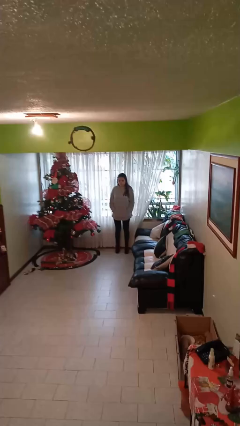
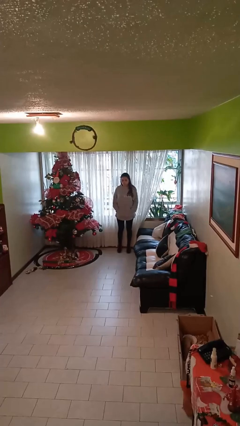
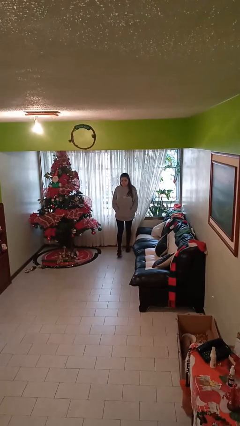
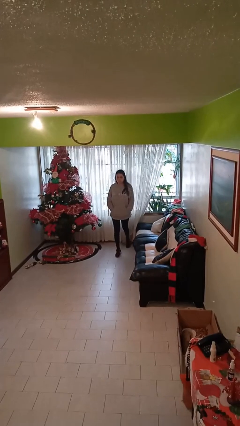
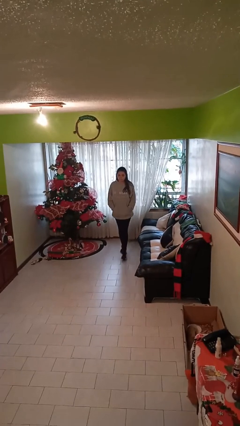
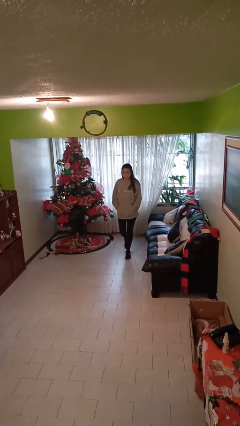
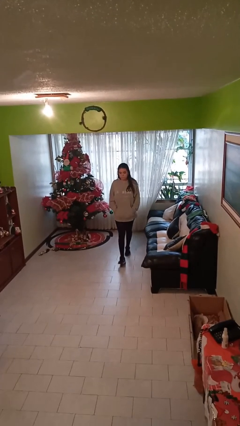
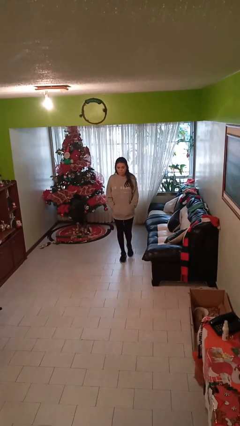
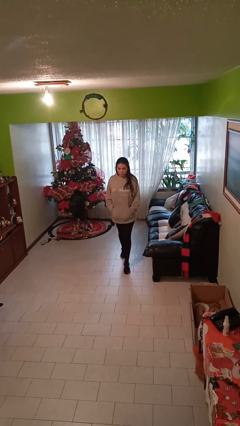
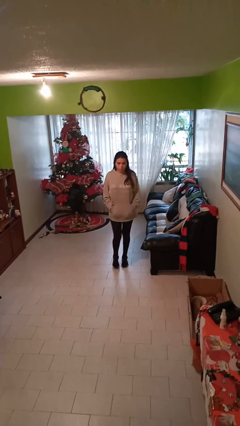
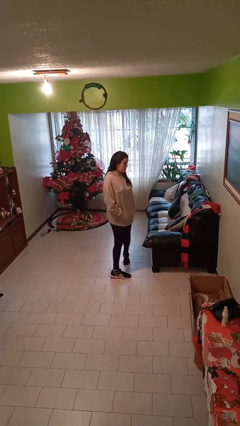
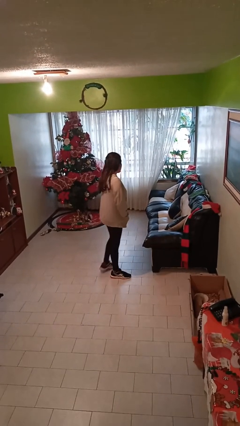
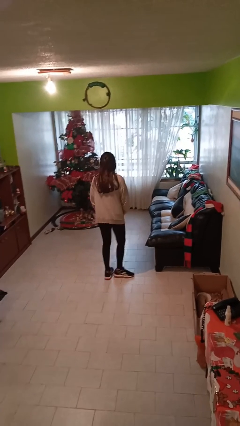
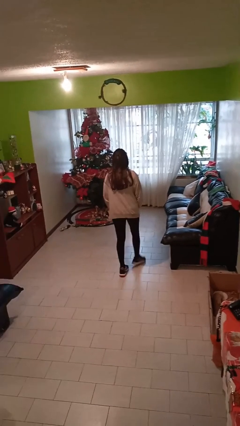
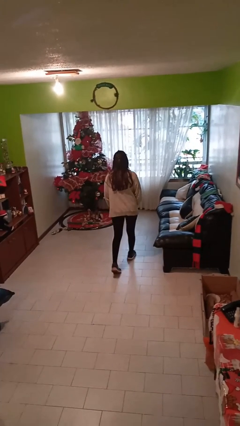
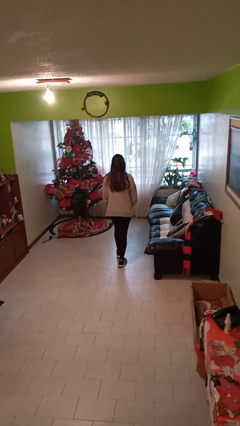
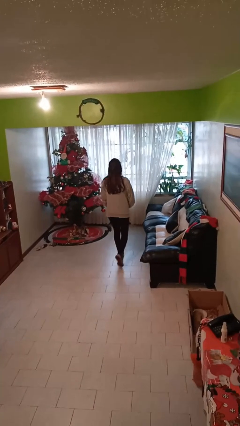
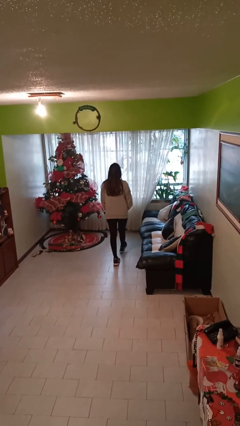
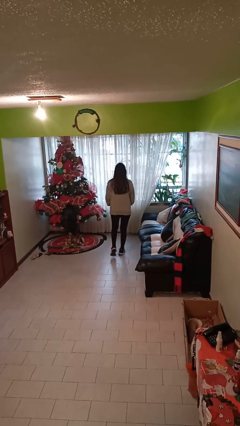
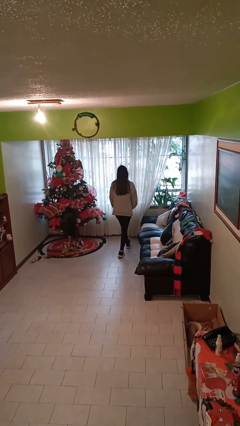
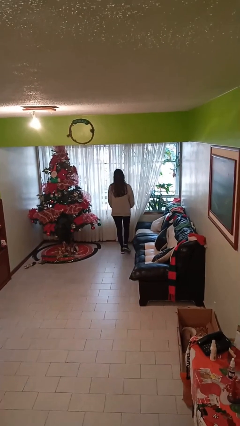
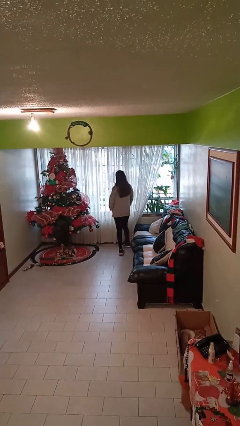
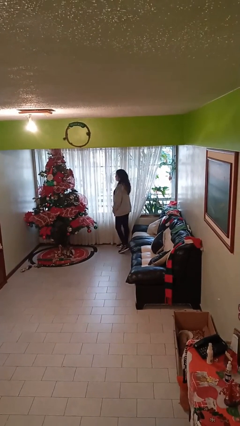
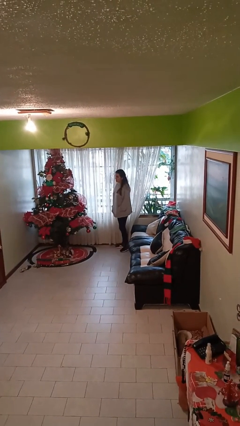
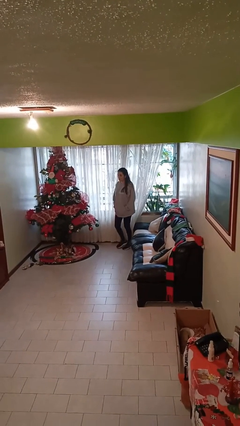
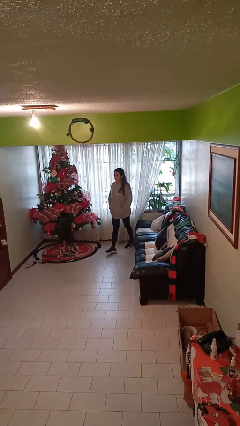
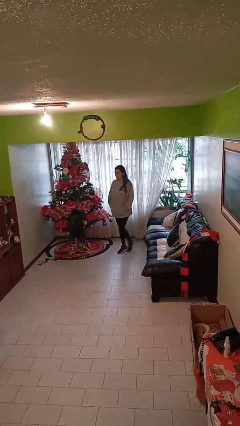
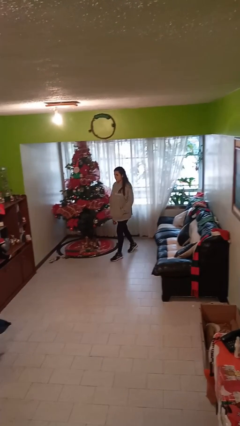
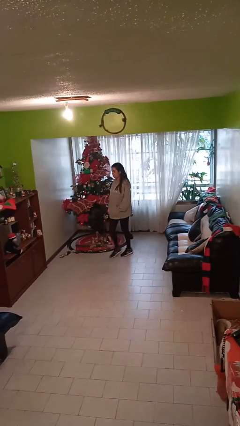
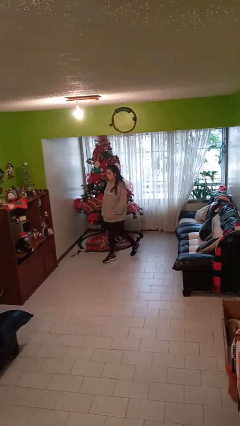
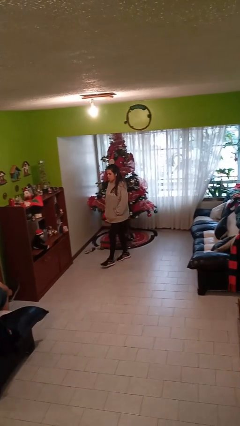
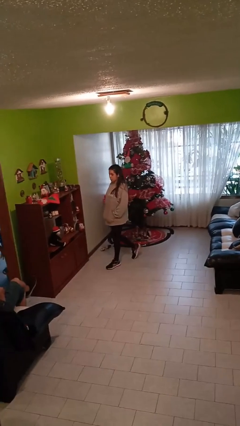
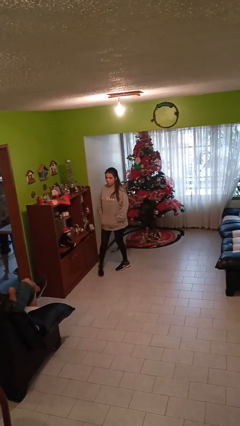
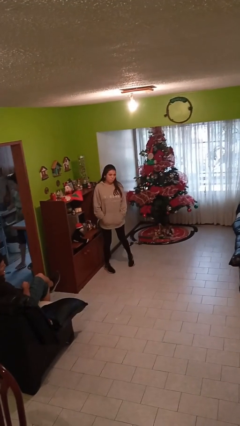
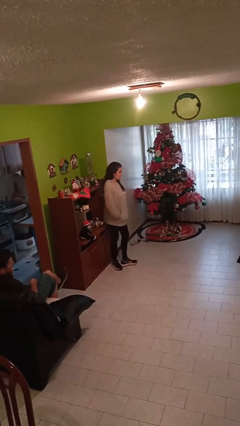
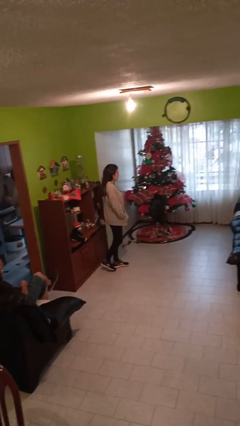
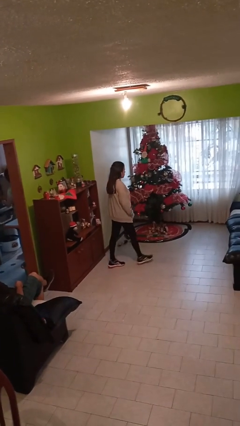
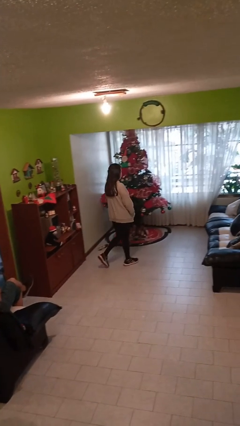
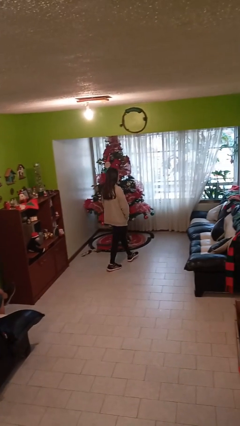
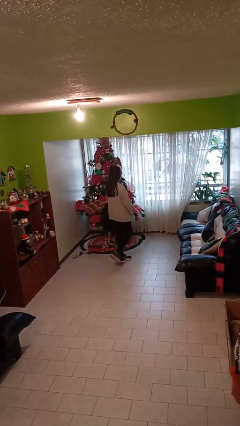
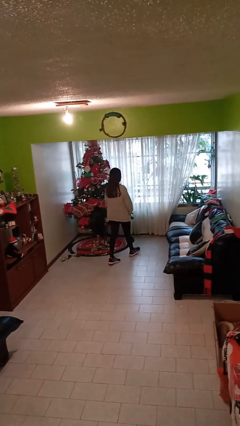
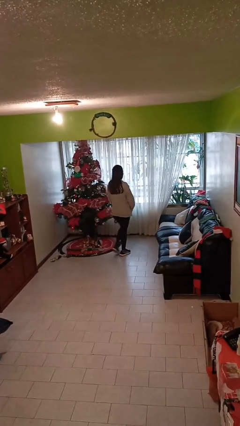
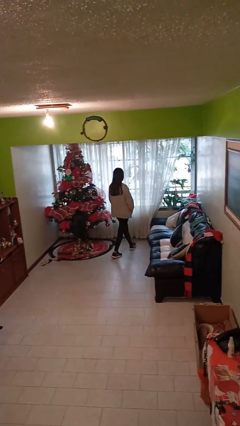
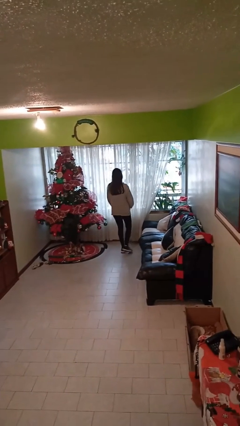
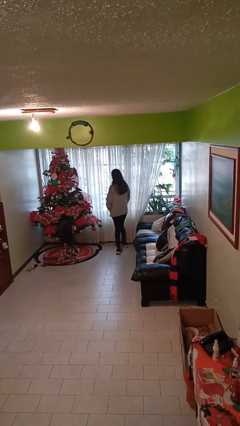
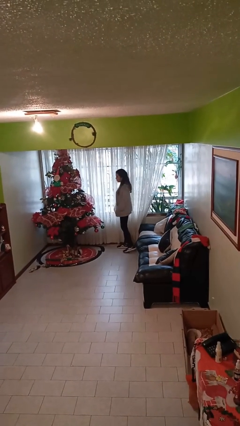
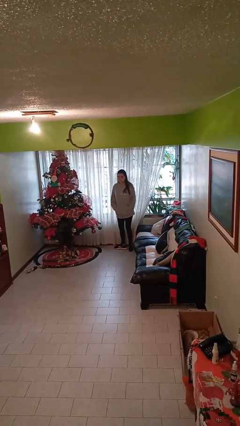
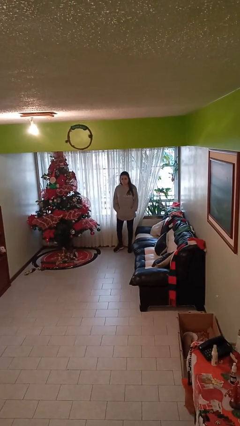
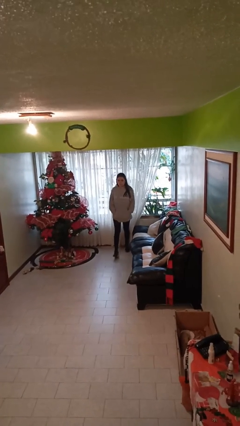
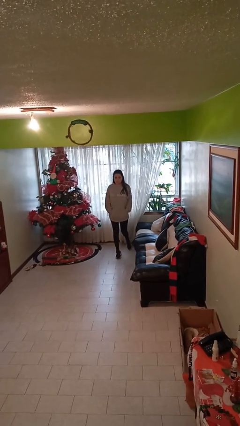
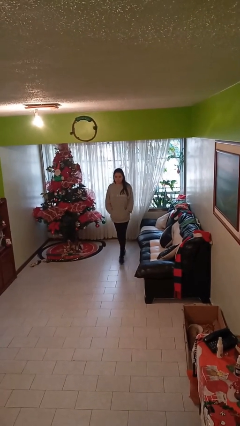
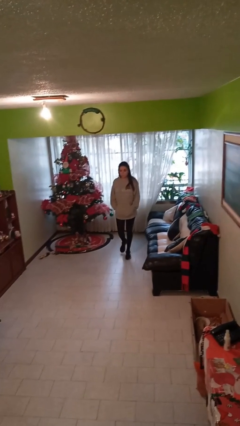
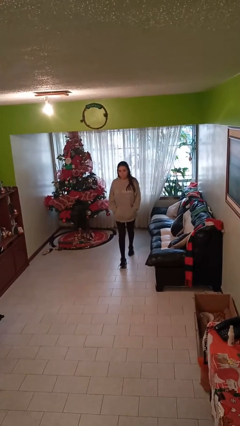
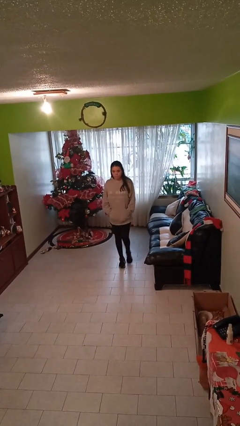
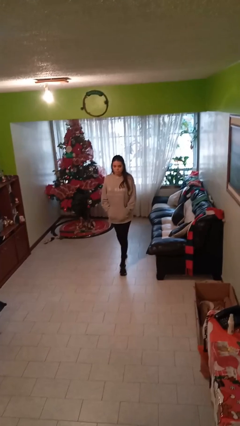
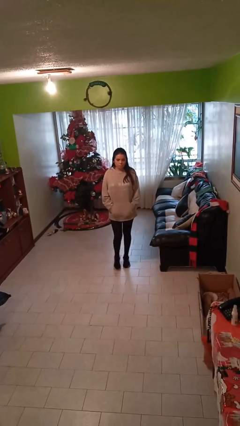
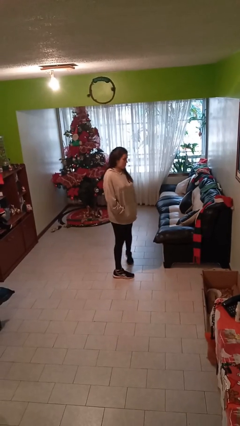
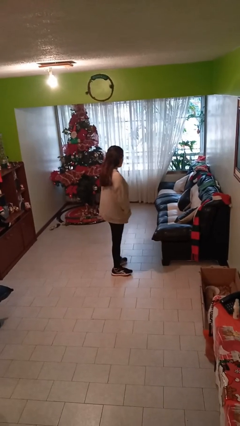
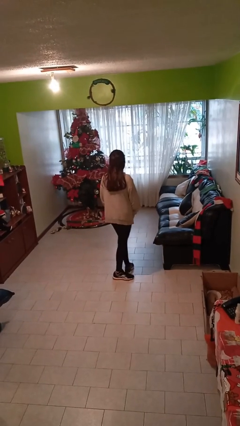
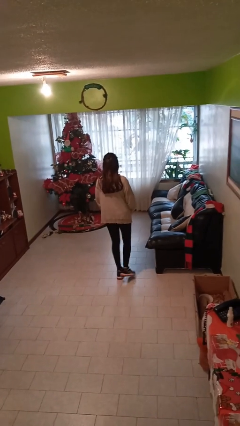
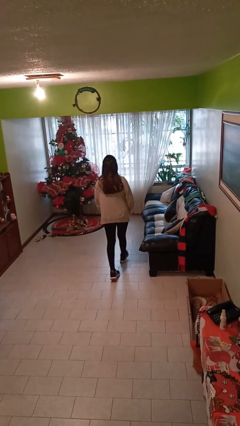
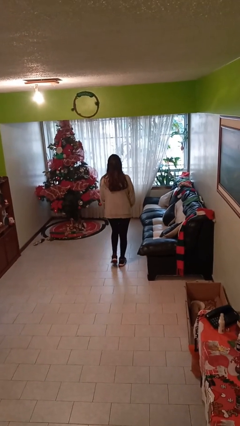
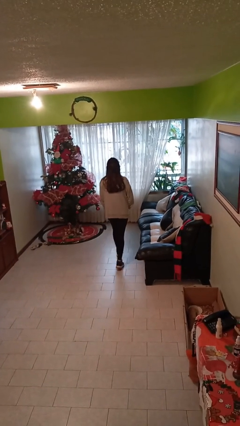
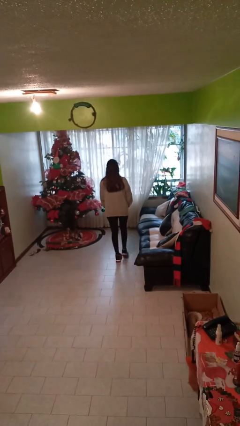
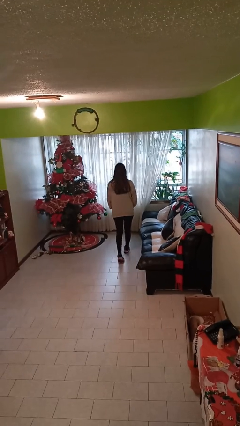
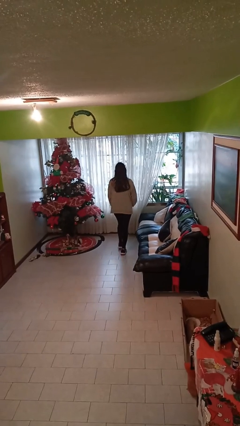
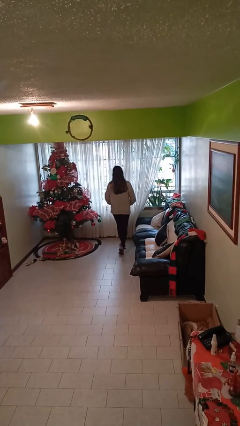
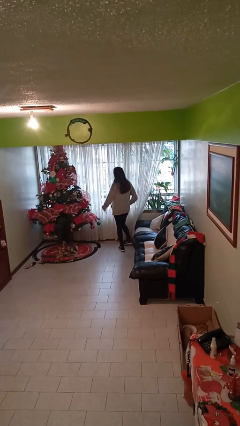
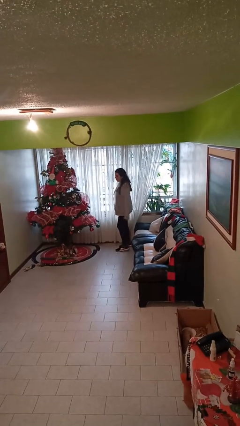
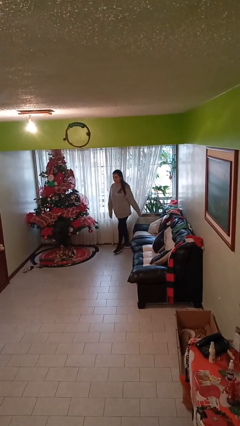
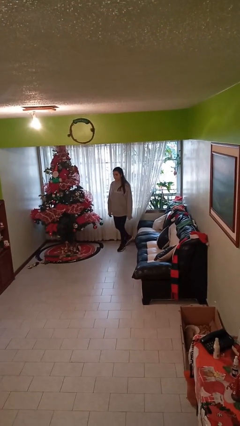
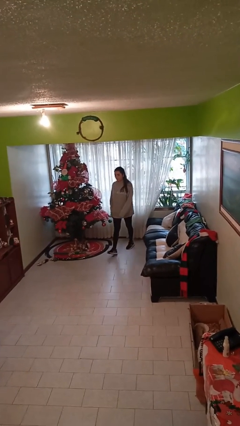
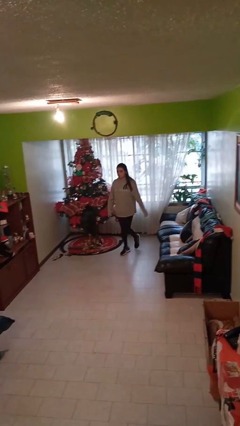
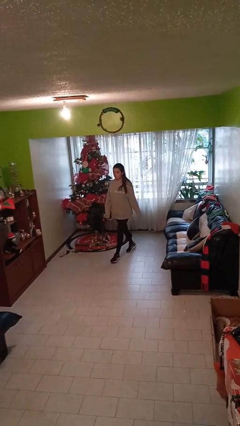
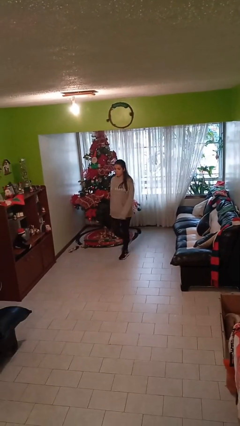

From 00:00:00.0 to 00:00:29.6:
person walks

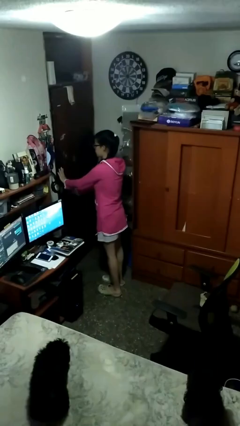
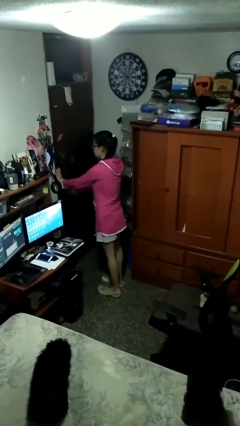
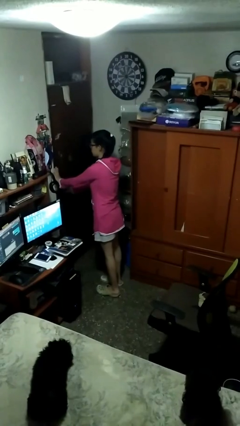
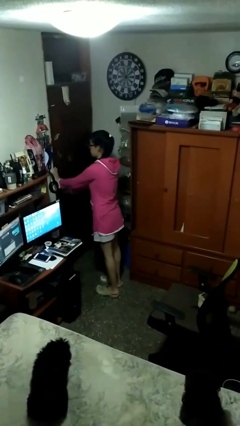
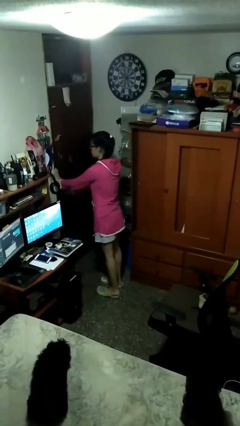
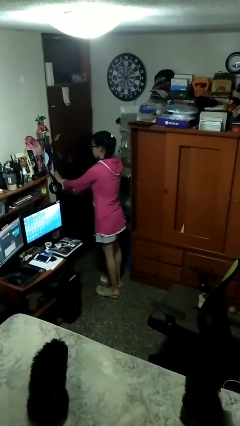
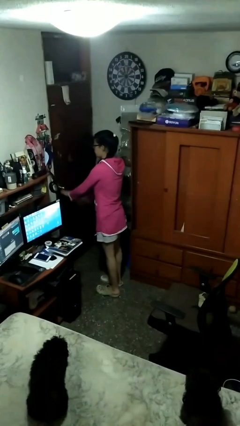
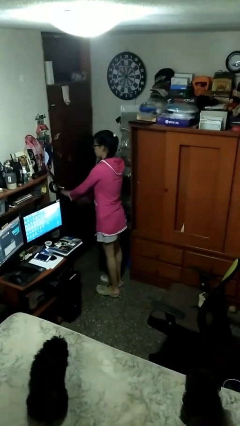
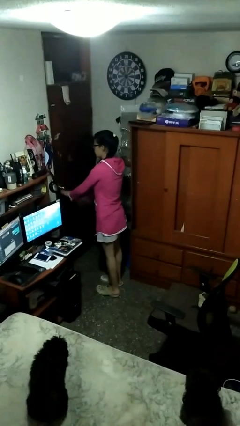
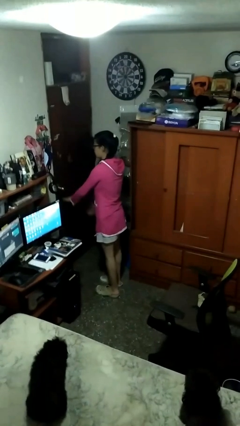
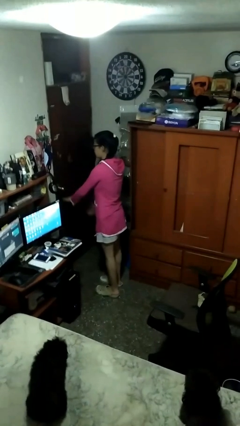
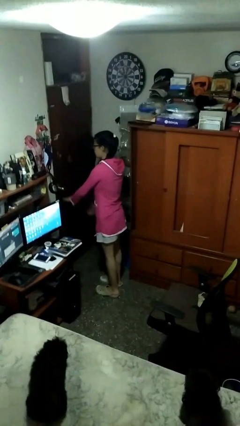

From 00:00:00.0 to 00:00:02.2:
person closes facility door

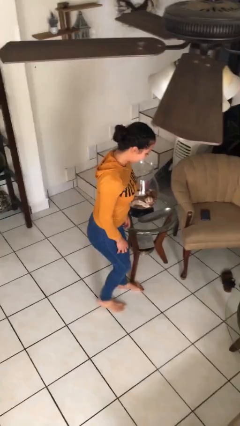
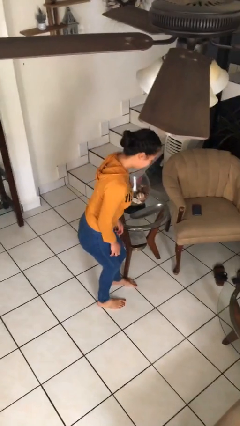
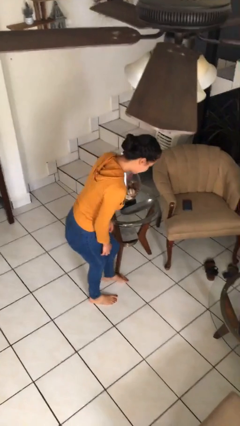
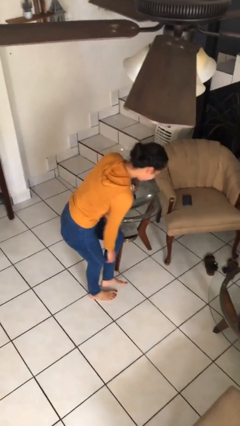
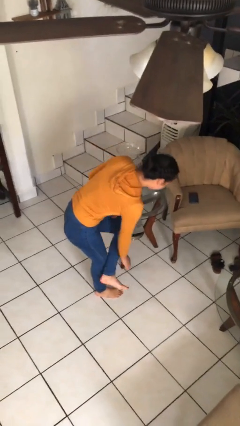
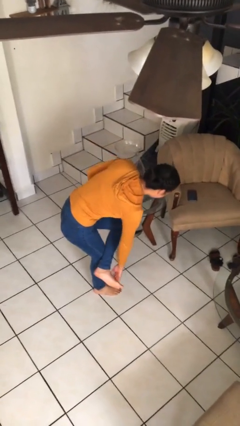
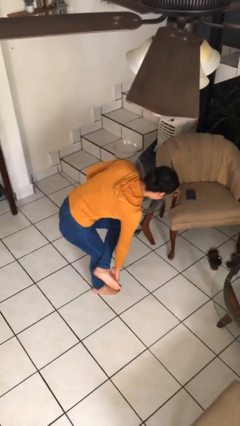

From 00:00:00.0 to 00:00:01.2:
person stubs toe
